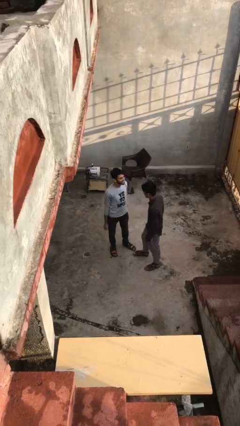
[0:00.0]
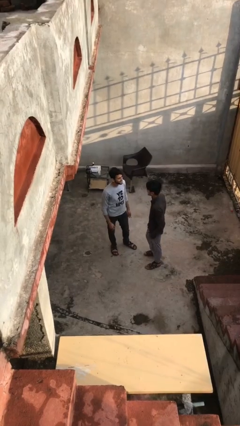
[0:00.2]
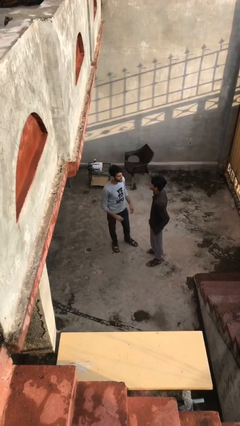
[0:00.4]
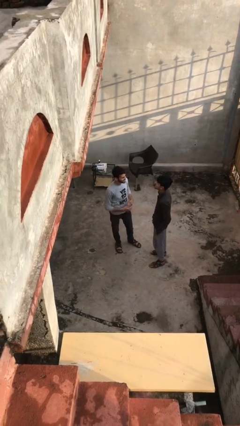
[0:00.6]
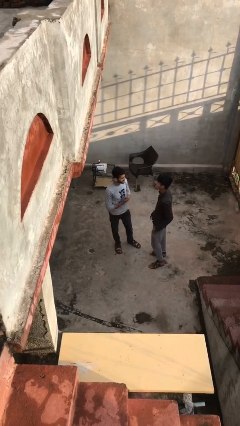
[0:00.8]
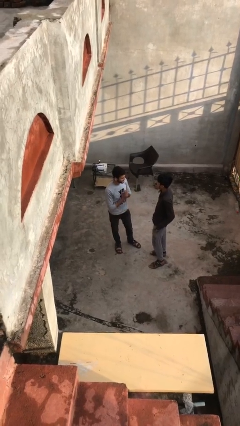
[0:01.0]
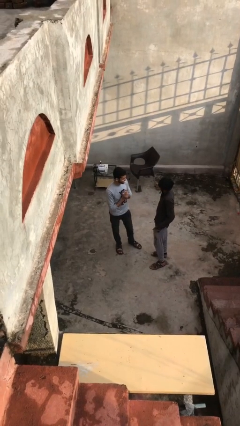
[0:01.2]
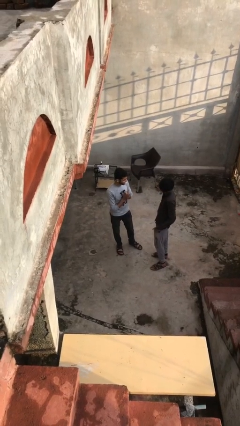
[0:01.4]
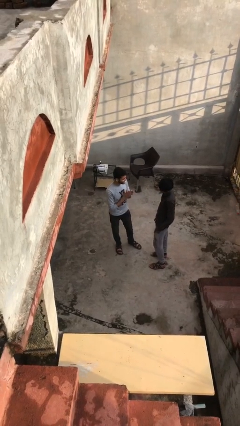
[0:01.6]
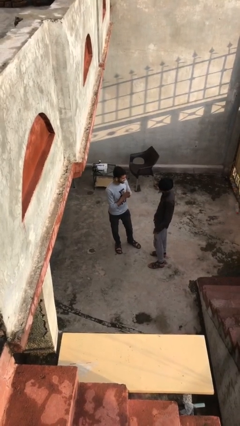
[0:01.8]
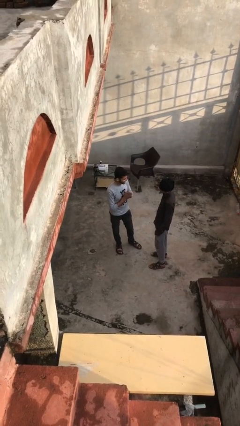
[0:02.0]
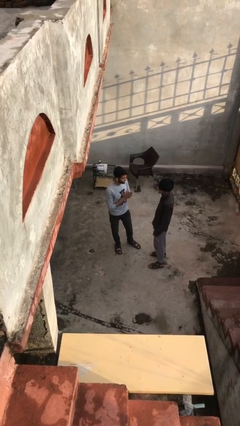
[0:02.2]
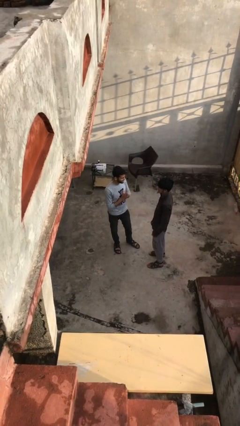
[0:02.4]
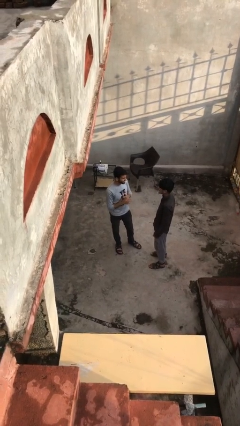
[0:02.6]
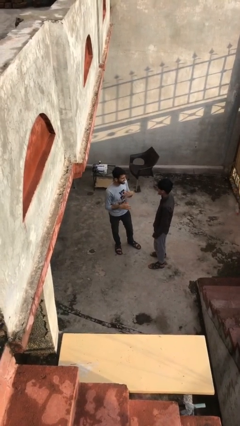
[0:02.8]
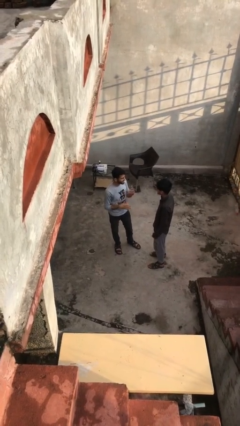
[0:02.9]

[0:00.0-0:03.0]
person talks to person

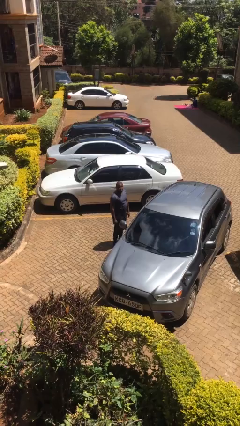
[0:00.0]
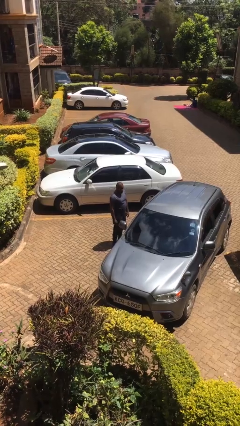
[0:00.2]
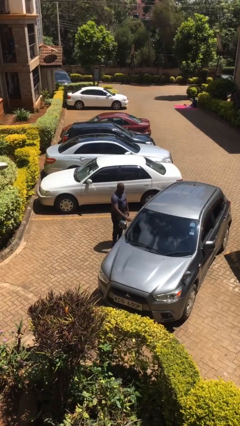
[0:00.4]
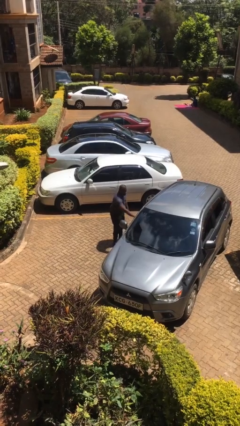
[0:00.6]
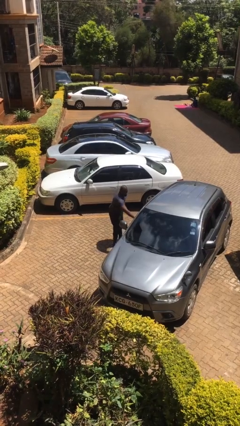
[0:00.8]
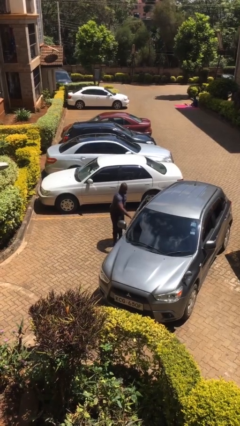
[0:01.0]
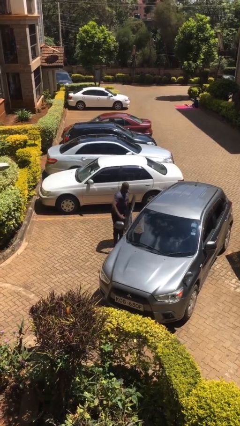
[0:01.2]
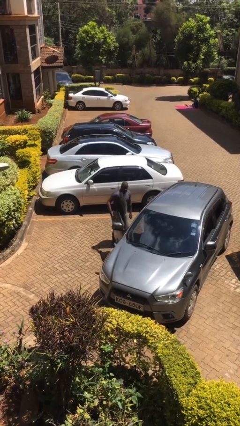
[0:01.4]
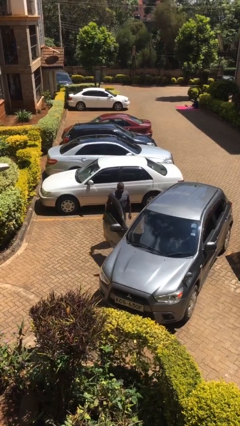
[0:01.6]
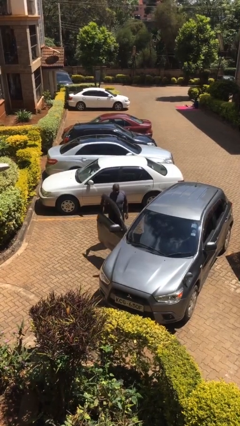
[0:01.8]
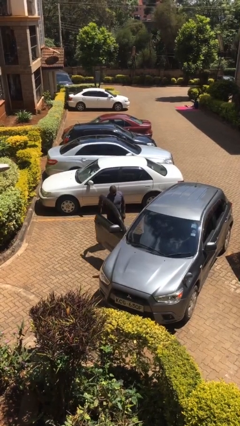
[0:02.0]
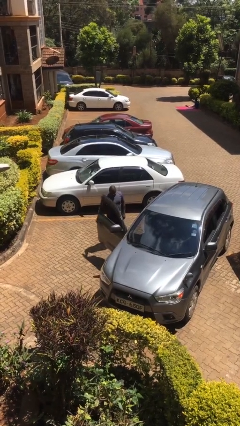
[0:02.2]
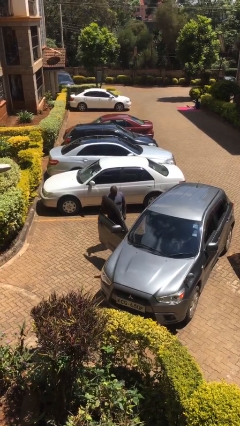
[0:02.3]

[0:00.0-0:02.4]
person opens car door

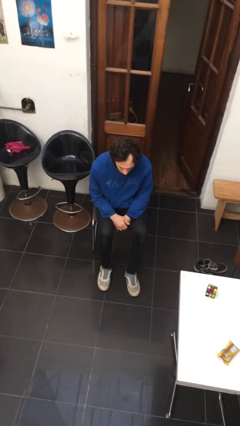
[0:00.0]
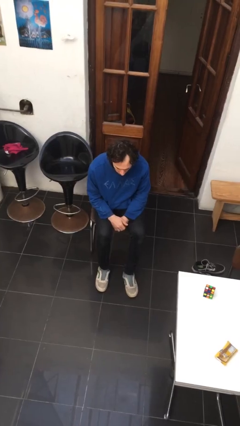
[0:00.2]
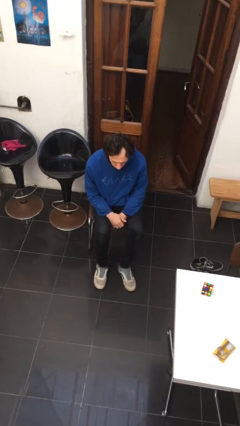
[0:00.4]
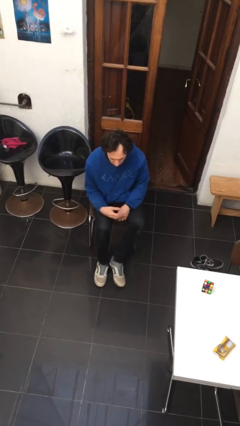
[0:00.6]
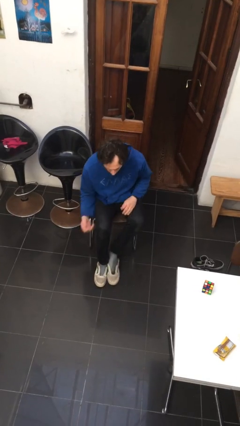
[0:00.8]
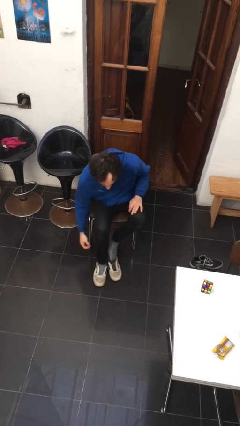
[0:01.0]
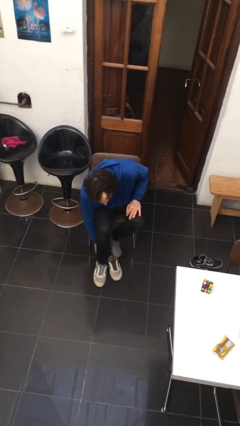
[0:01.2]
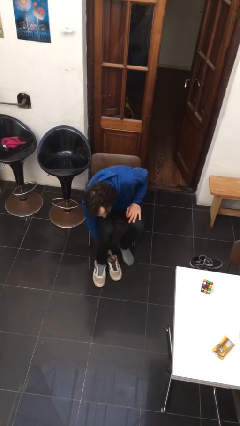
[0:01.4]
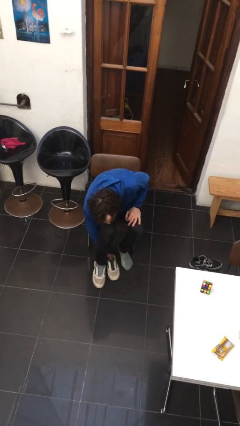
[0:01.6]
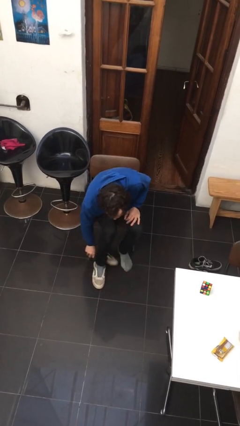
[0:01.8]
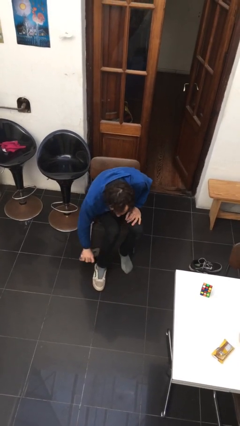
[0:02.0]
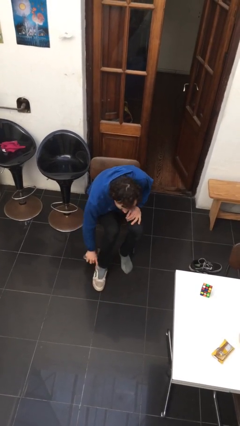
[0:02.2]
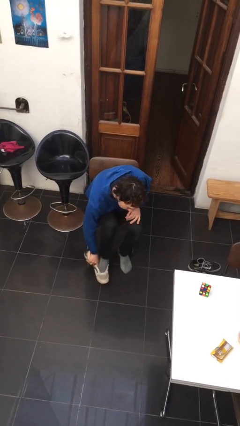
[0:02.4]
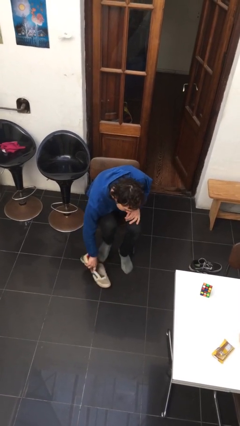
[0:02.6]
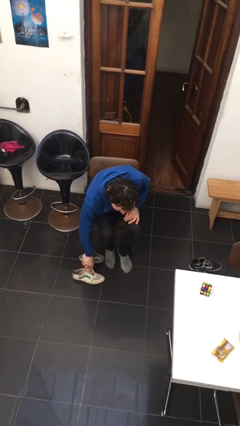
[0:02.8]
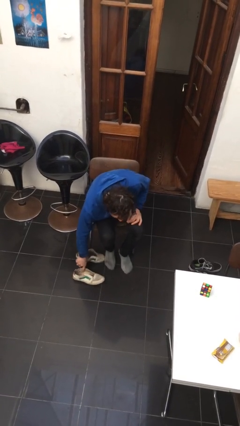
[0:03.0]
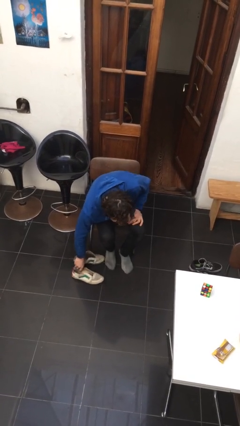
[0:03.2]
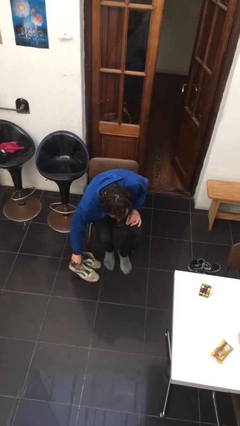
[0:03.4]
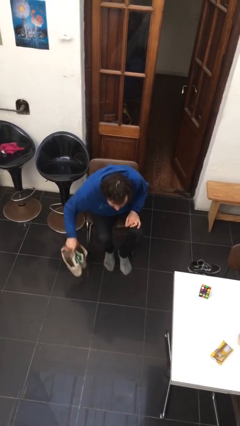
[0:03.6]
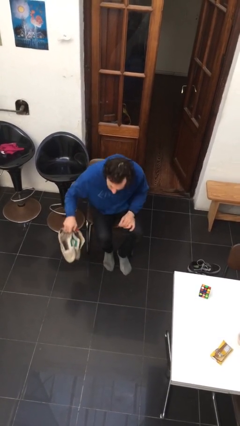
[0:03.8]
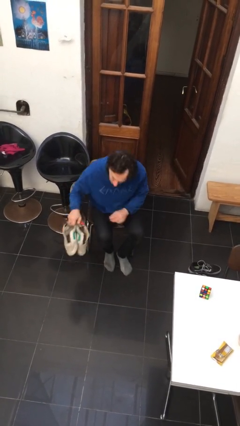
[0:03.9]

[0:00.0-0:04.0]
person takes off shoes

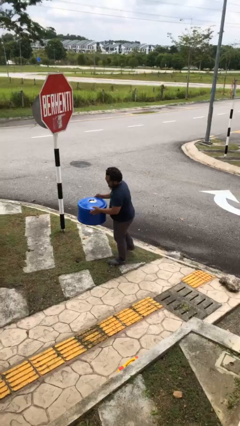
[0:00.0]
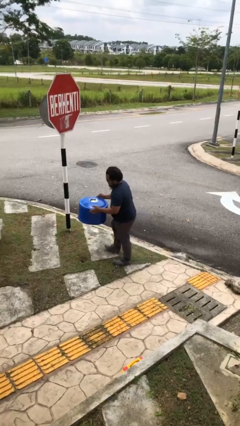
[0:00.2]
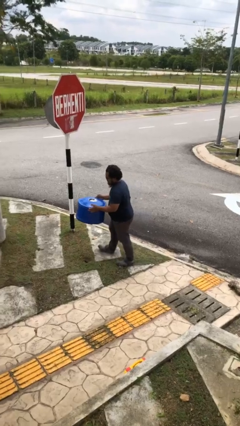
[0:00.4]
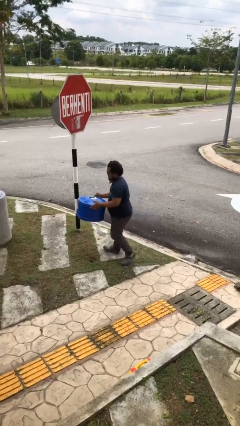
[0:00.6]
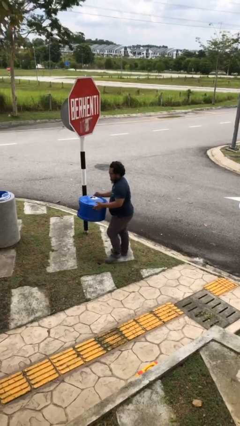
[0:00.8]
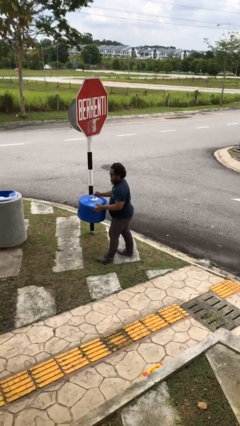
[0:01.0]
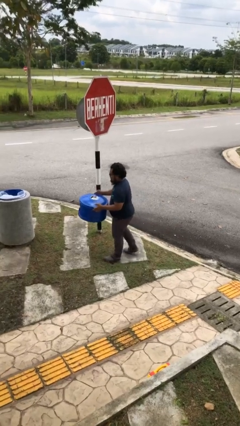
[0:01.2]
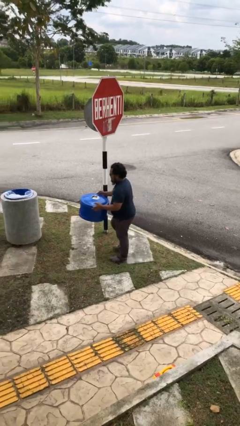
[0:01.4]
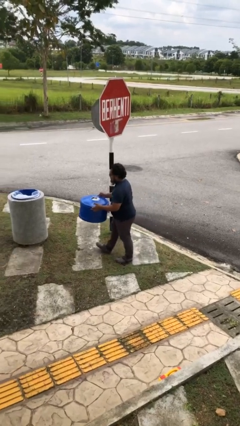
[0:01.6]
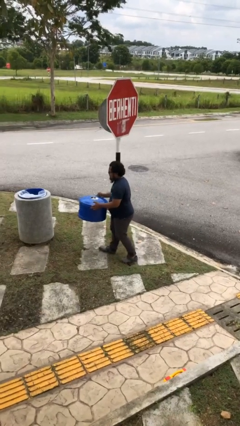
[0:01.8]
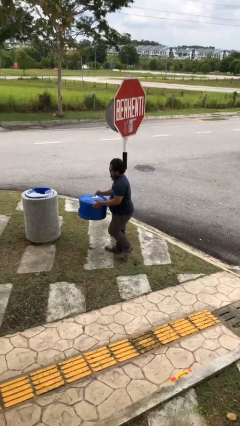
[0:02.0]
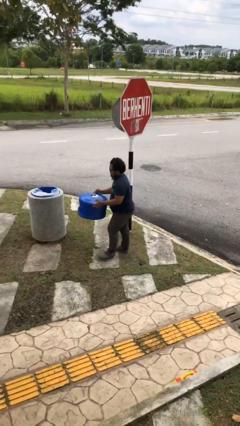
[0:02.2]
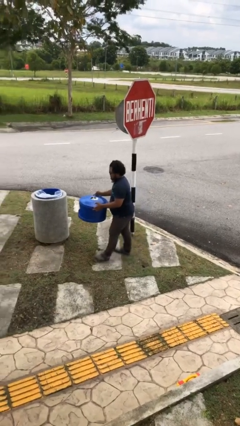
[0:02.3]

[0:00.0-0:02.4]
person carries heavy object

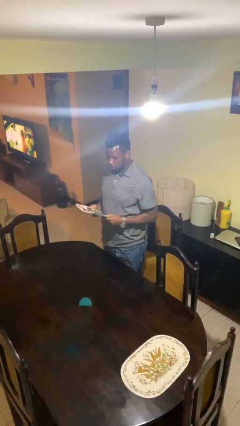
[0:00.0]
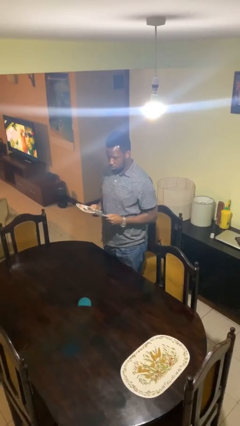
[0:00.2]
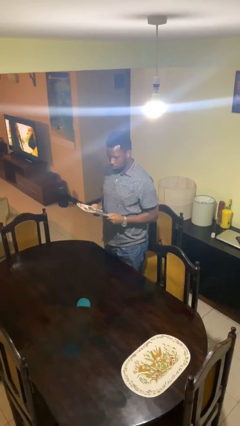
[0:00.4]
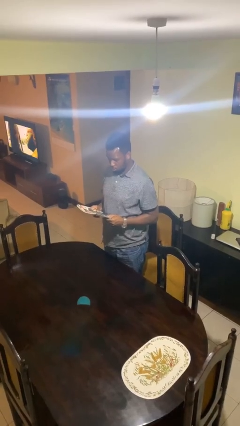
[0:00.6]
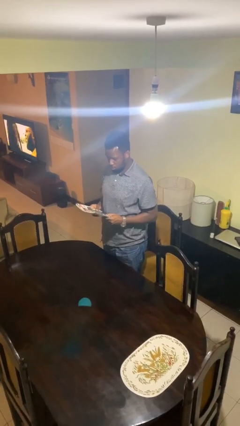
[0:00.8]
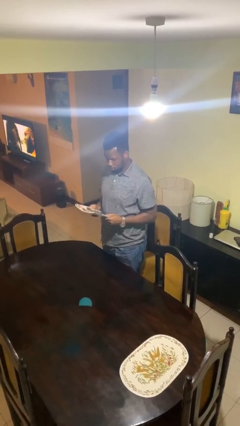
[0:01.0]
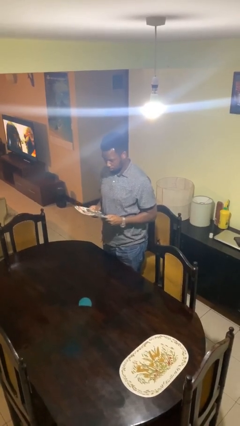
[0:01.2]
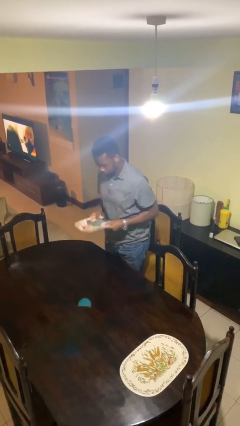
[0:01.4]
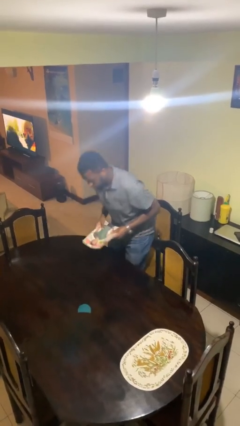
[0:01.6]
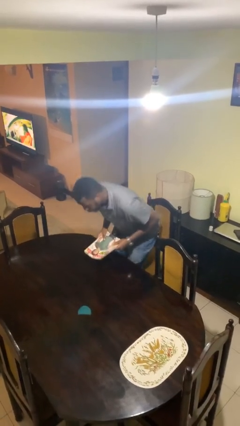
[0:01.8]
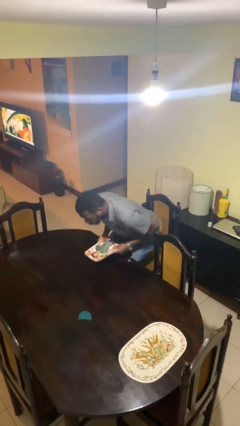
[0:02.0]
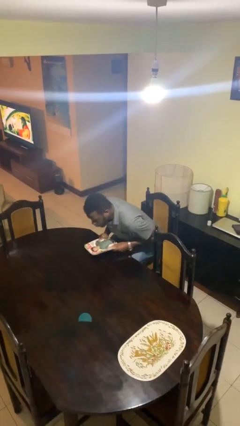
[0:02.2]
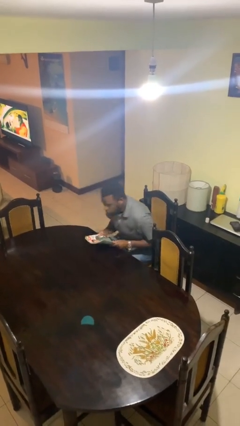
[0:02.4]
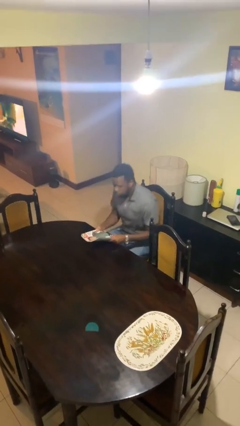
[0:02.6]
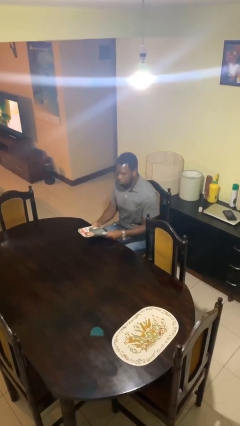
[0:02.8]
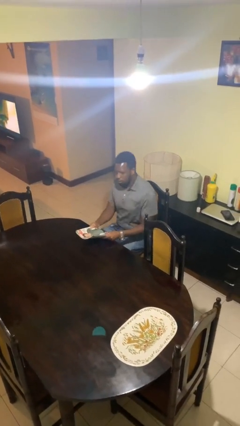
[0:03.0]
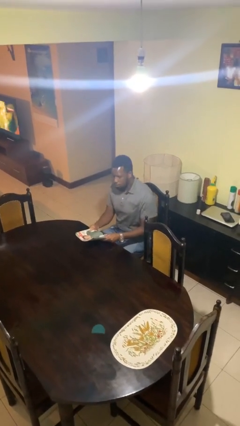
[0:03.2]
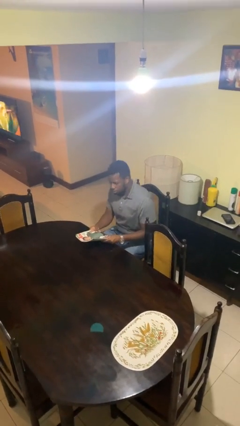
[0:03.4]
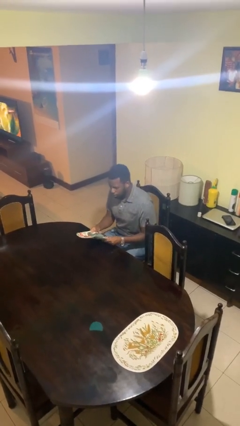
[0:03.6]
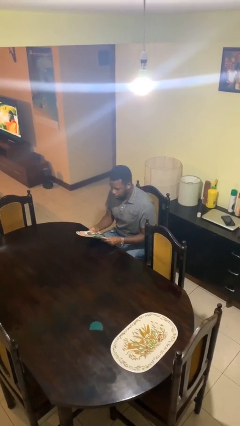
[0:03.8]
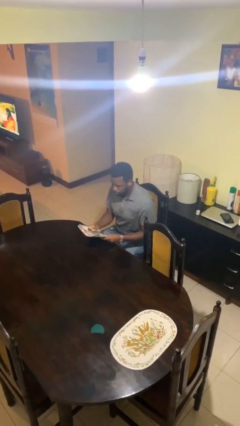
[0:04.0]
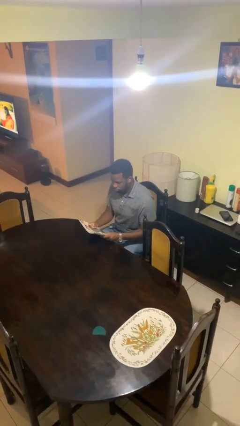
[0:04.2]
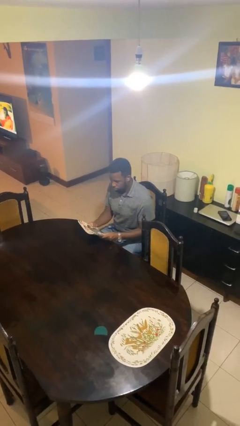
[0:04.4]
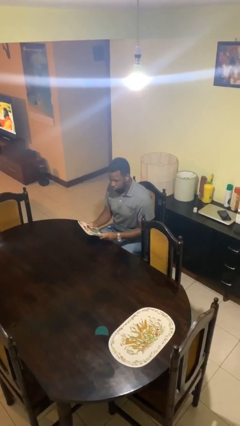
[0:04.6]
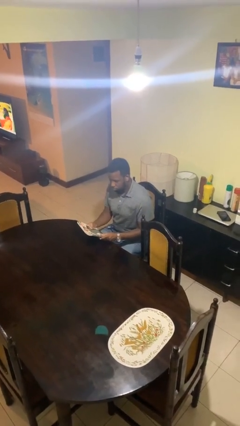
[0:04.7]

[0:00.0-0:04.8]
person sits down

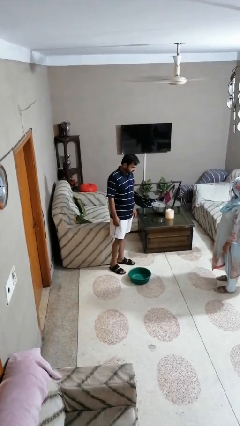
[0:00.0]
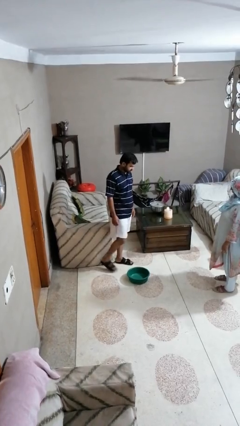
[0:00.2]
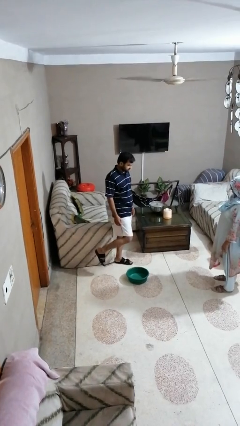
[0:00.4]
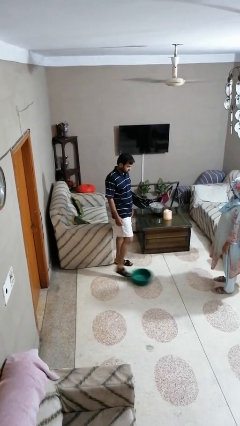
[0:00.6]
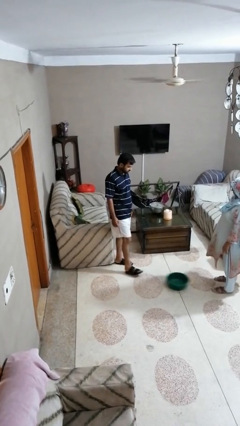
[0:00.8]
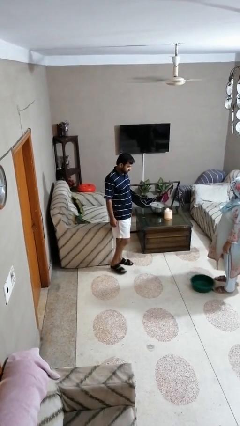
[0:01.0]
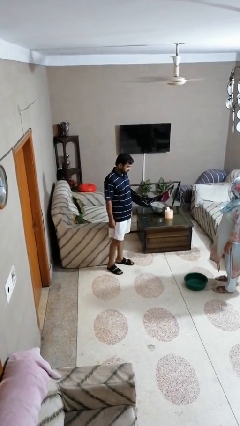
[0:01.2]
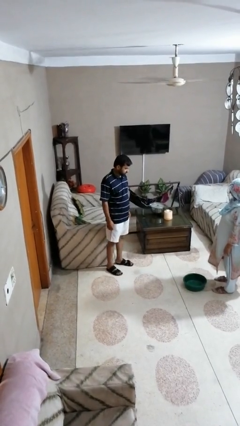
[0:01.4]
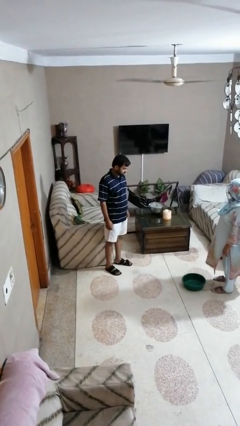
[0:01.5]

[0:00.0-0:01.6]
person kicks object to person
